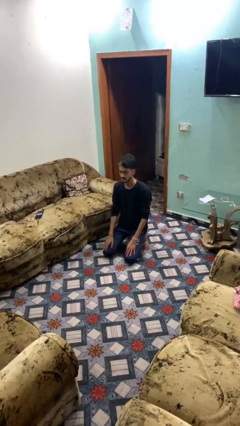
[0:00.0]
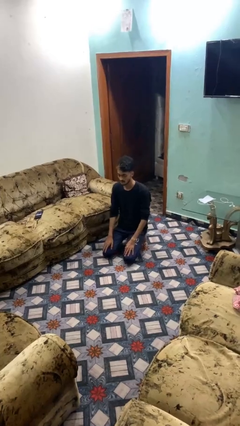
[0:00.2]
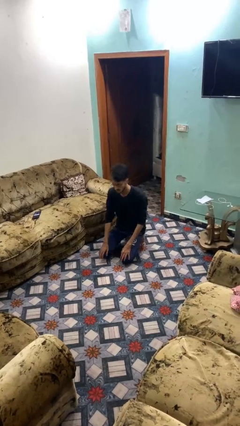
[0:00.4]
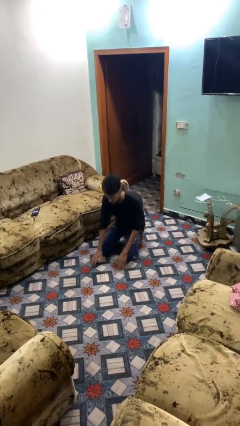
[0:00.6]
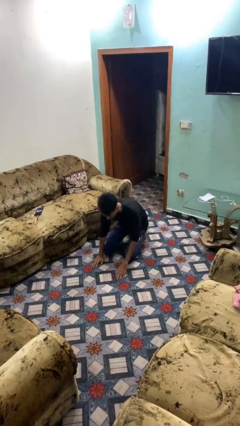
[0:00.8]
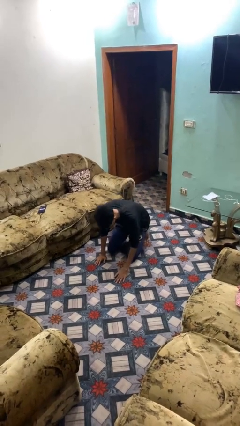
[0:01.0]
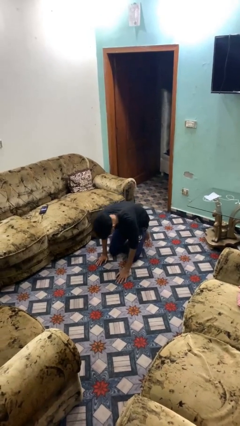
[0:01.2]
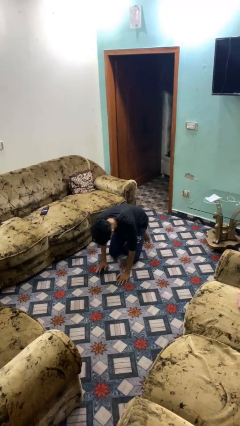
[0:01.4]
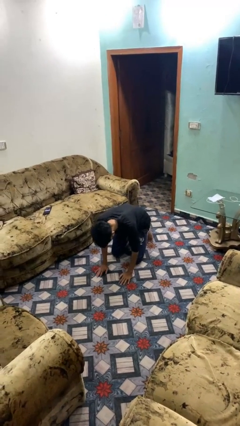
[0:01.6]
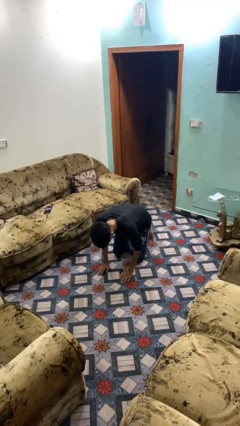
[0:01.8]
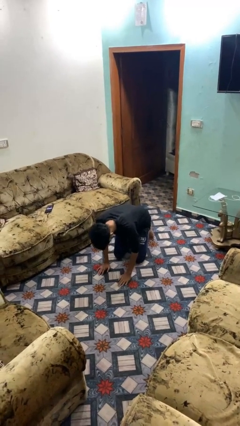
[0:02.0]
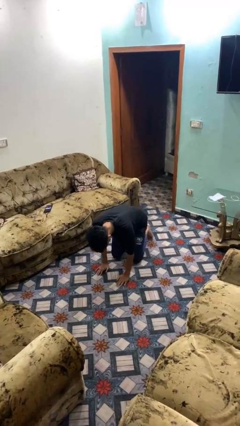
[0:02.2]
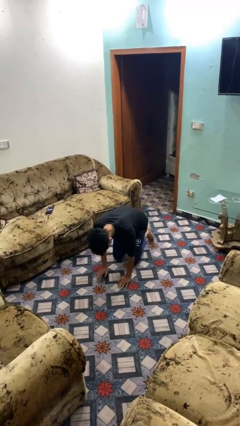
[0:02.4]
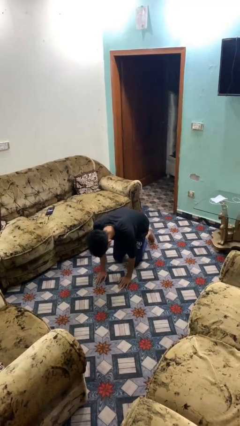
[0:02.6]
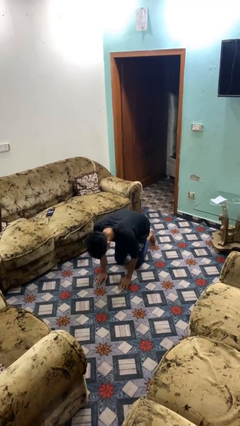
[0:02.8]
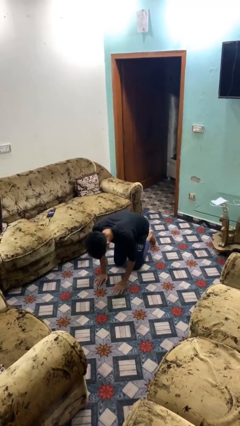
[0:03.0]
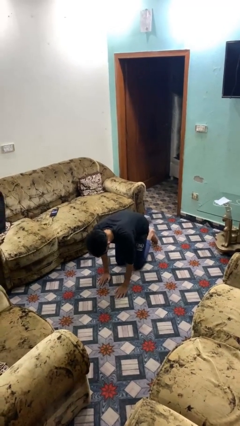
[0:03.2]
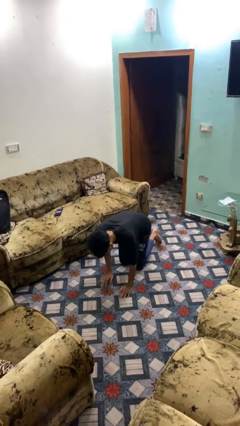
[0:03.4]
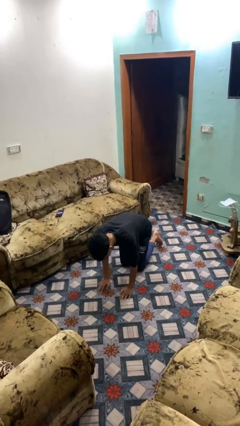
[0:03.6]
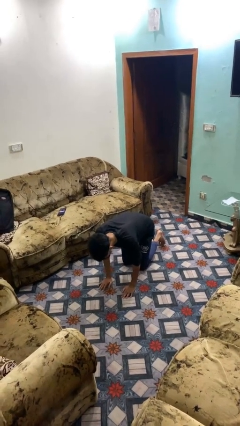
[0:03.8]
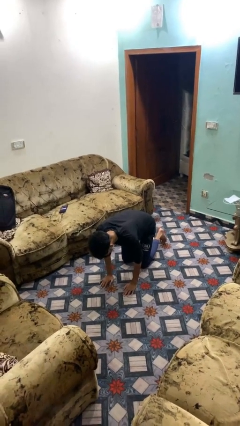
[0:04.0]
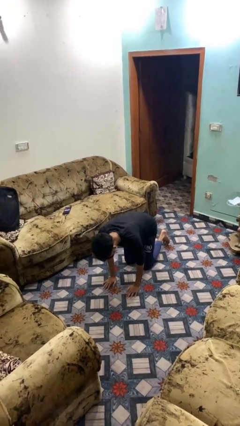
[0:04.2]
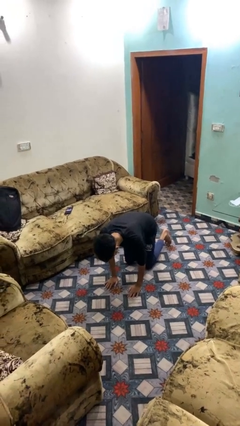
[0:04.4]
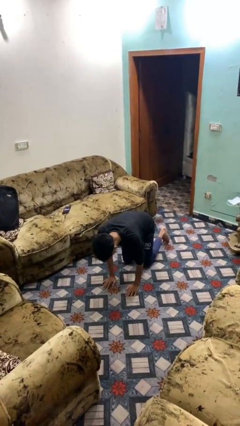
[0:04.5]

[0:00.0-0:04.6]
person crawls

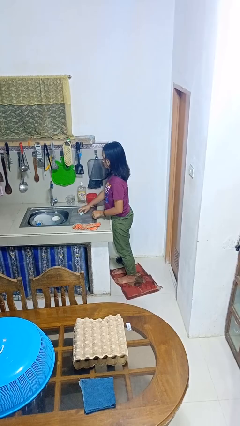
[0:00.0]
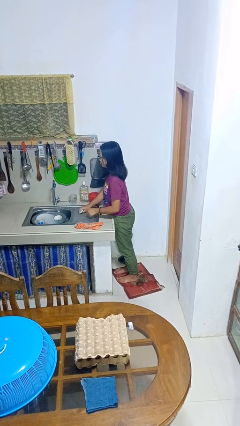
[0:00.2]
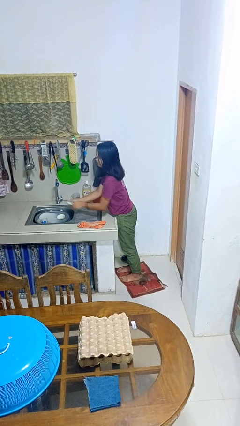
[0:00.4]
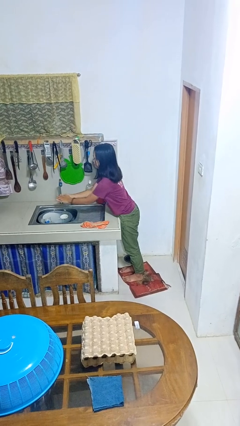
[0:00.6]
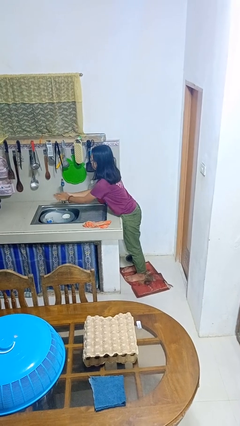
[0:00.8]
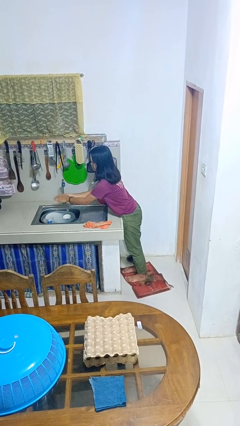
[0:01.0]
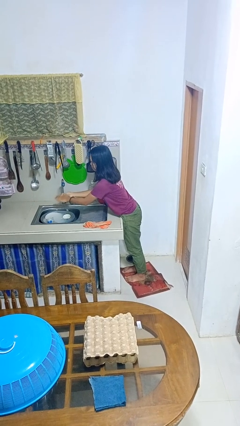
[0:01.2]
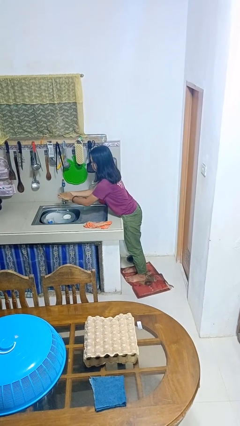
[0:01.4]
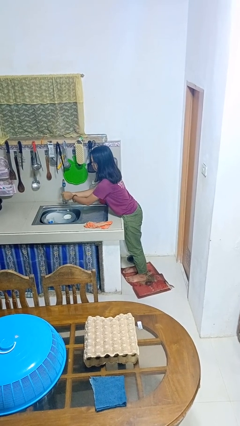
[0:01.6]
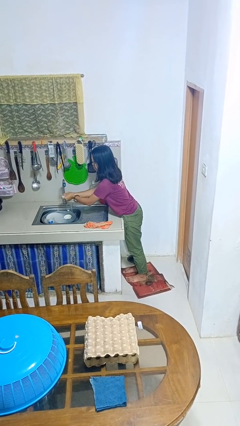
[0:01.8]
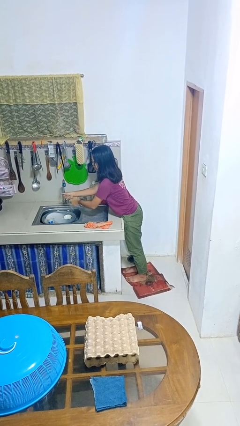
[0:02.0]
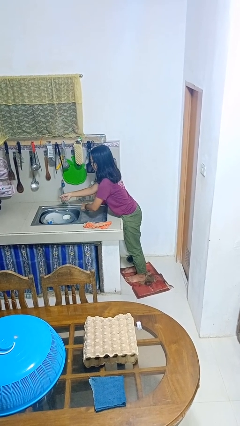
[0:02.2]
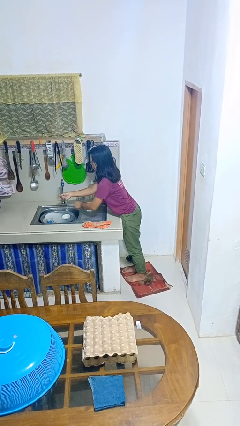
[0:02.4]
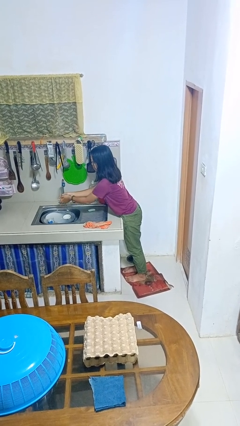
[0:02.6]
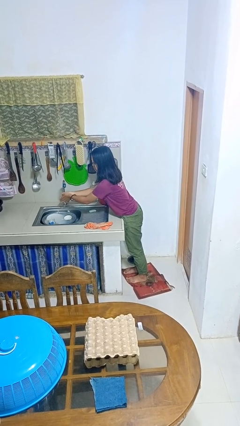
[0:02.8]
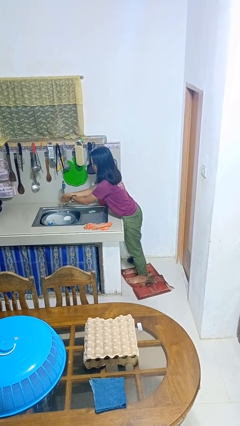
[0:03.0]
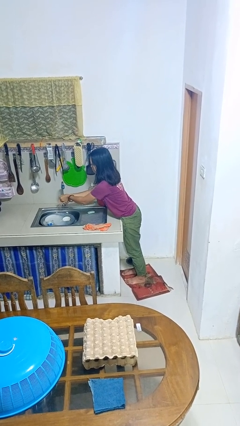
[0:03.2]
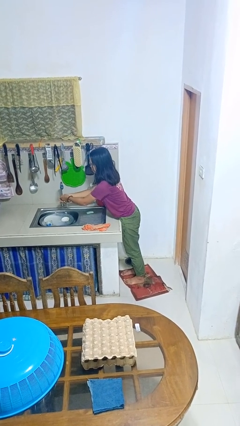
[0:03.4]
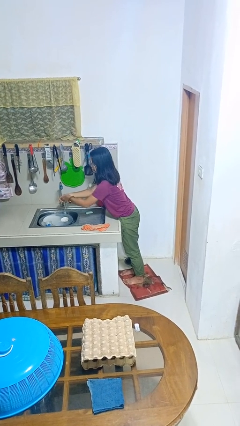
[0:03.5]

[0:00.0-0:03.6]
person washes hands

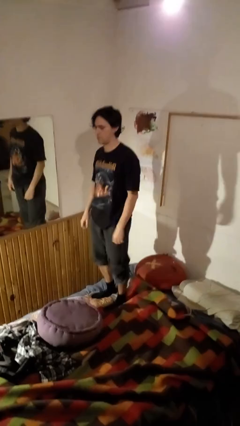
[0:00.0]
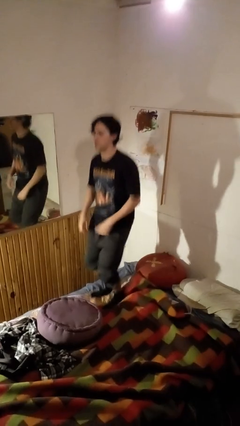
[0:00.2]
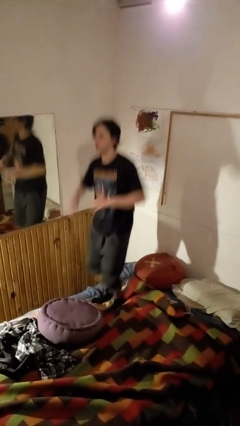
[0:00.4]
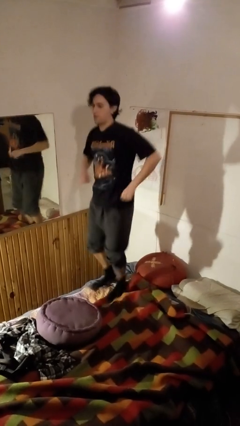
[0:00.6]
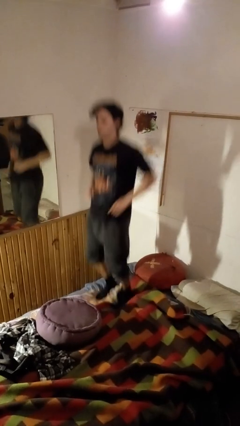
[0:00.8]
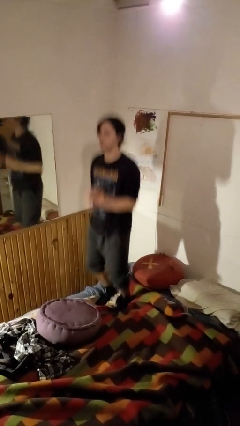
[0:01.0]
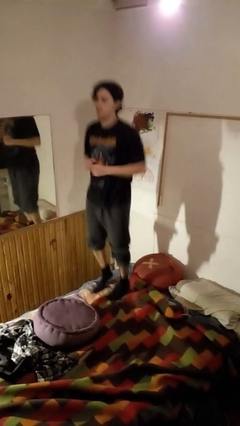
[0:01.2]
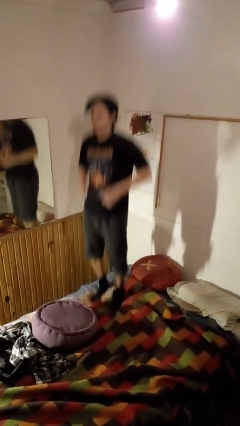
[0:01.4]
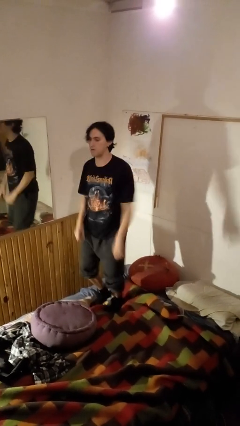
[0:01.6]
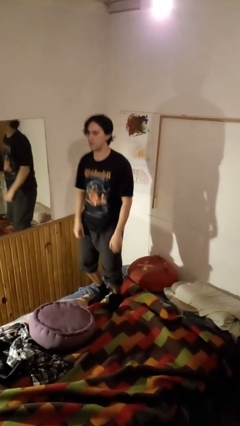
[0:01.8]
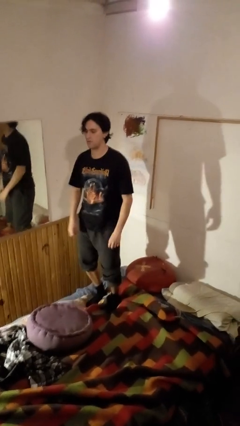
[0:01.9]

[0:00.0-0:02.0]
person jumps on bed

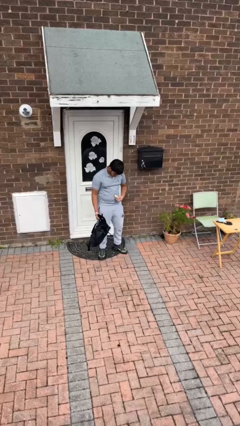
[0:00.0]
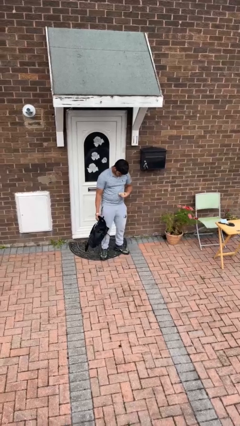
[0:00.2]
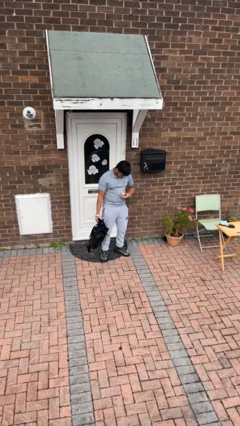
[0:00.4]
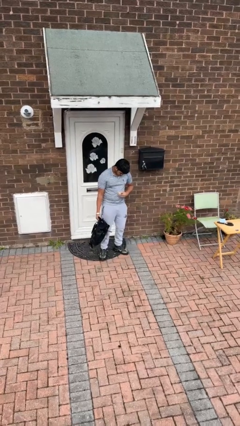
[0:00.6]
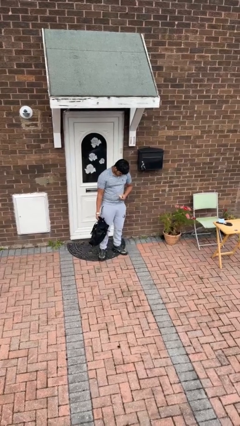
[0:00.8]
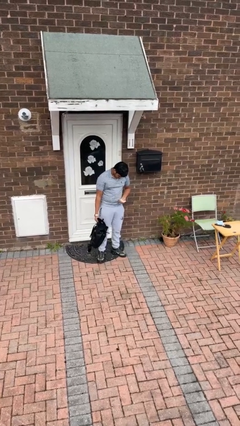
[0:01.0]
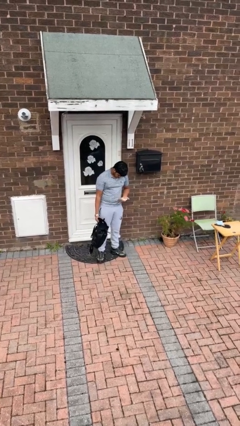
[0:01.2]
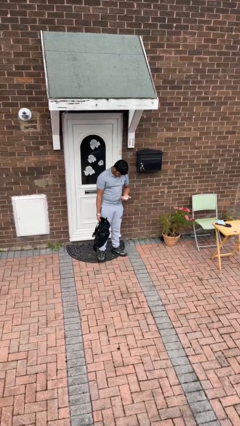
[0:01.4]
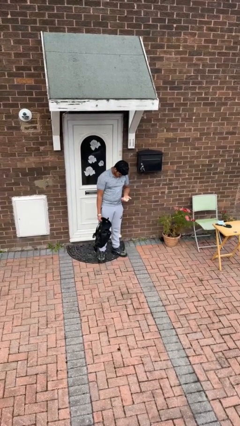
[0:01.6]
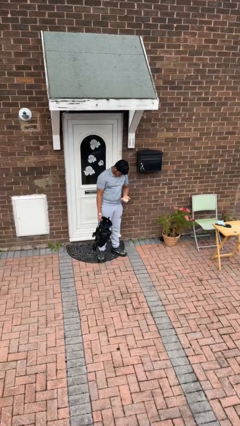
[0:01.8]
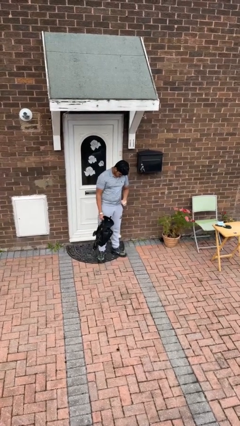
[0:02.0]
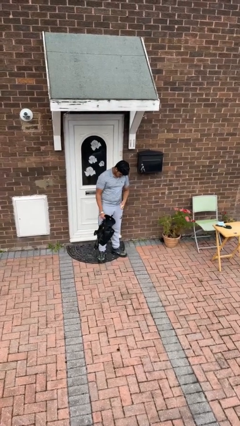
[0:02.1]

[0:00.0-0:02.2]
person takes object from backpack

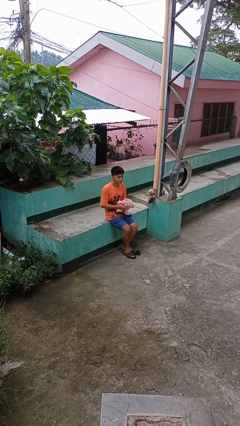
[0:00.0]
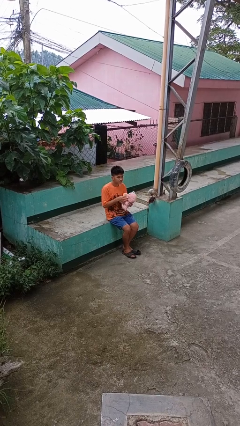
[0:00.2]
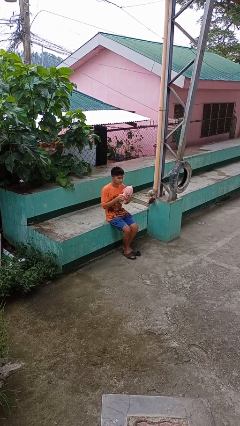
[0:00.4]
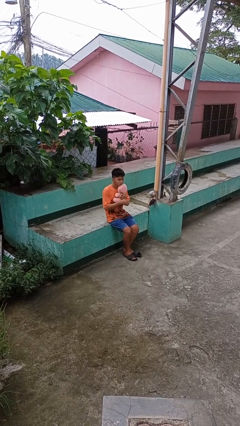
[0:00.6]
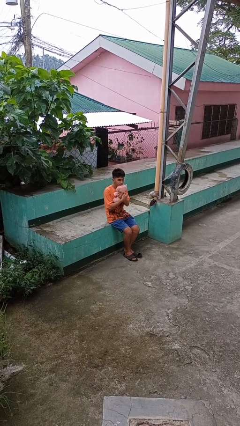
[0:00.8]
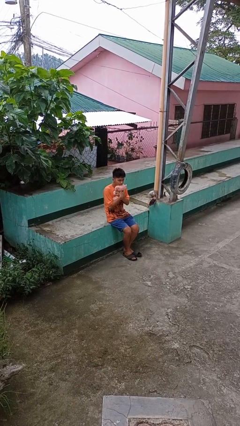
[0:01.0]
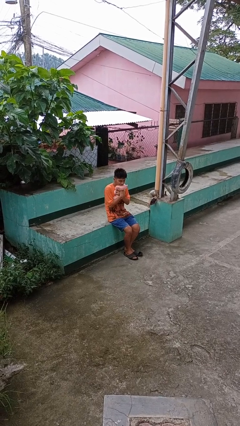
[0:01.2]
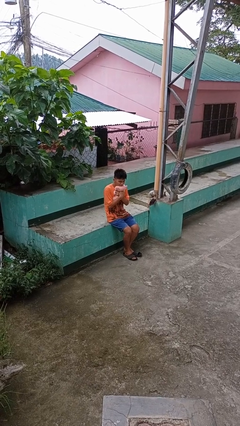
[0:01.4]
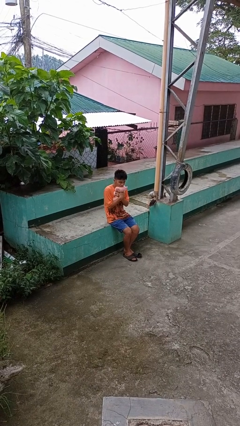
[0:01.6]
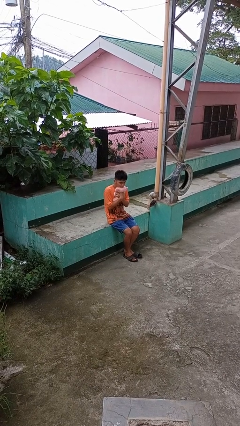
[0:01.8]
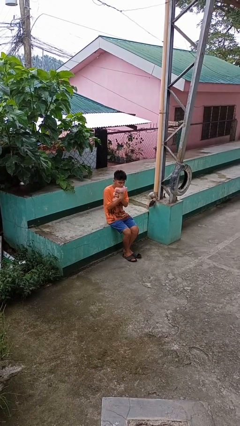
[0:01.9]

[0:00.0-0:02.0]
person hugs stuffed animal

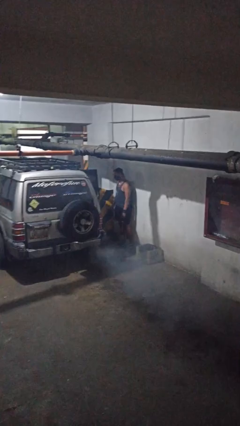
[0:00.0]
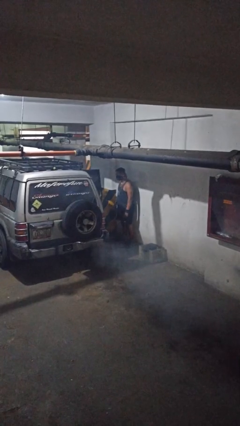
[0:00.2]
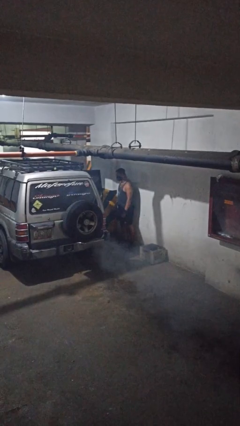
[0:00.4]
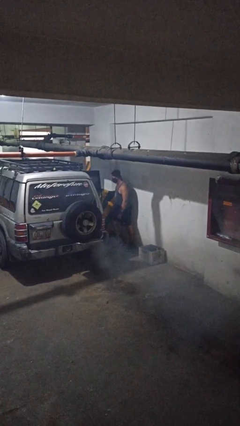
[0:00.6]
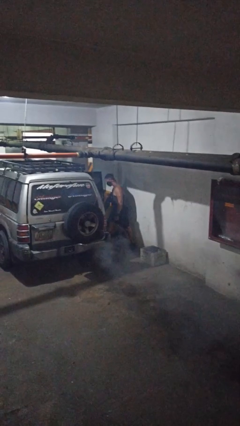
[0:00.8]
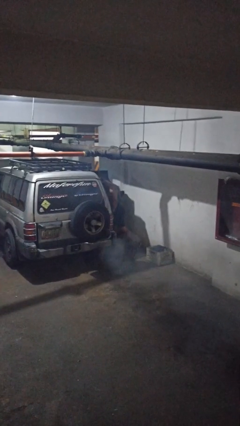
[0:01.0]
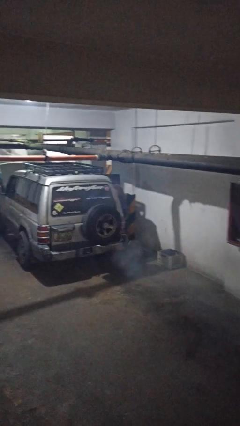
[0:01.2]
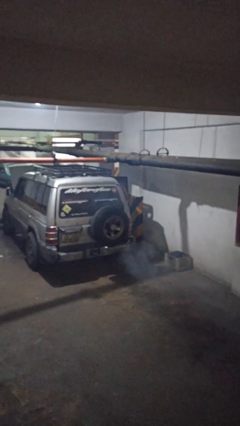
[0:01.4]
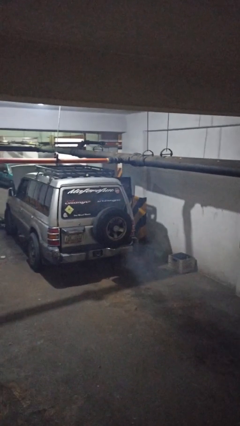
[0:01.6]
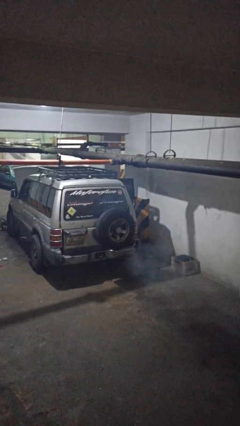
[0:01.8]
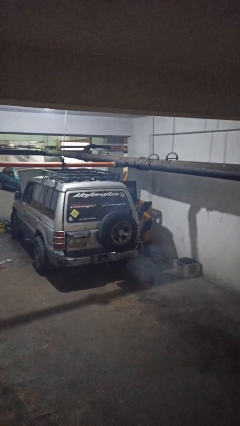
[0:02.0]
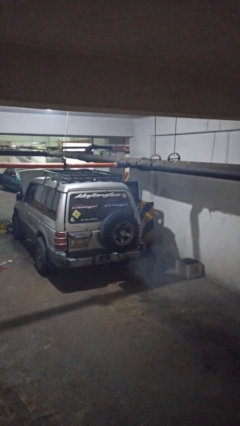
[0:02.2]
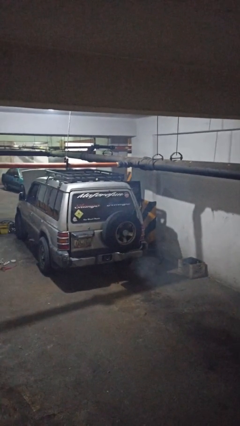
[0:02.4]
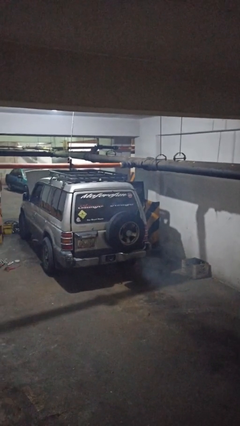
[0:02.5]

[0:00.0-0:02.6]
person enters car

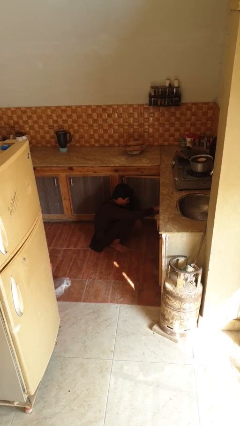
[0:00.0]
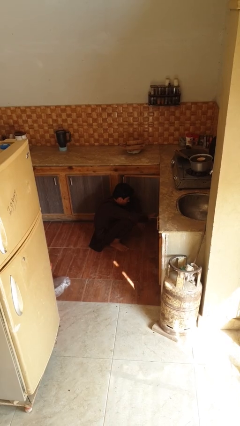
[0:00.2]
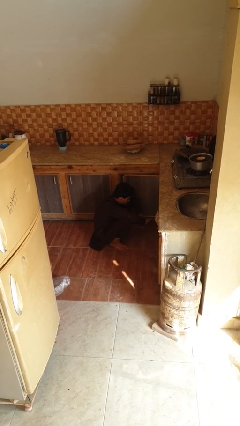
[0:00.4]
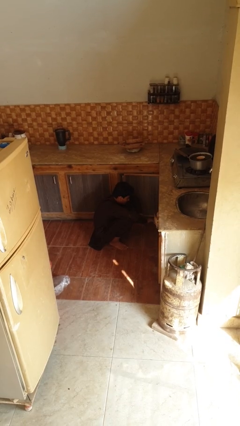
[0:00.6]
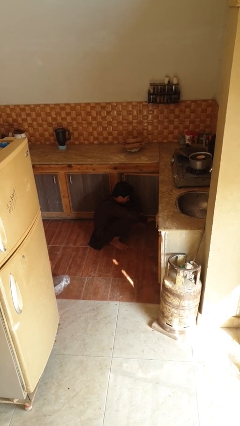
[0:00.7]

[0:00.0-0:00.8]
person puts object into kitchen drawer
